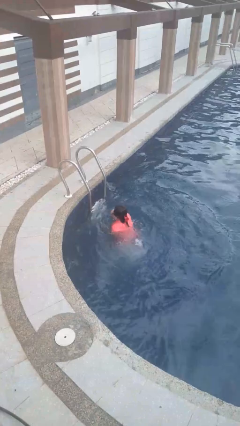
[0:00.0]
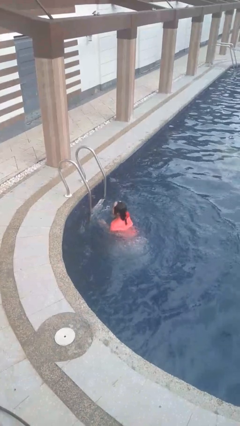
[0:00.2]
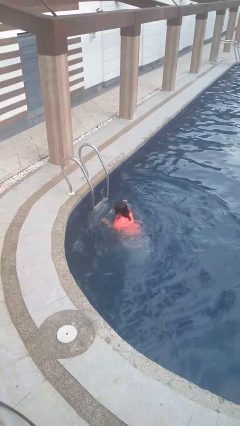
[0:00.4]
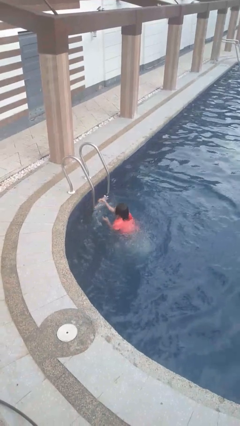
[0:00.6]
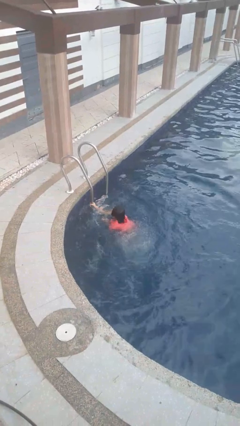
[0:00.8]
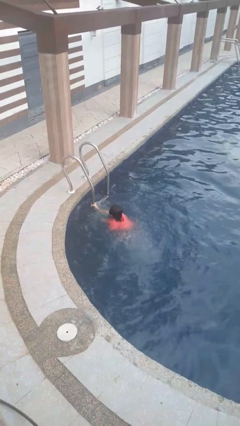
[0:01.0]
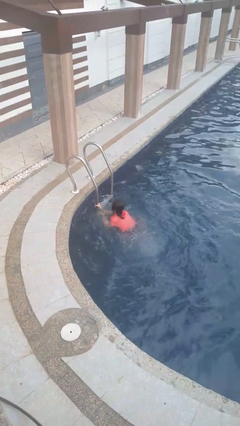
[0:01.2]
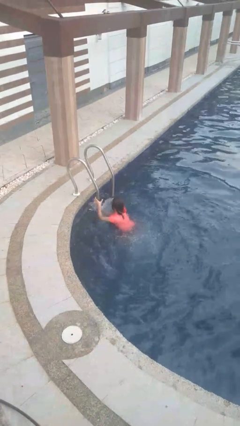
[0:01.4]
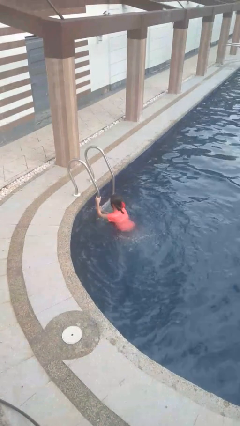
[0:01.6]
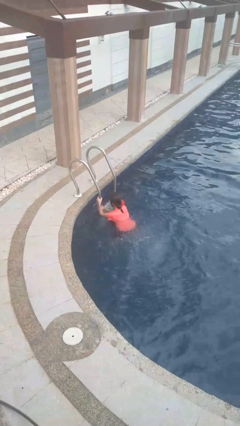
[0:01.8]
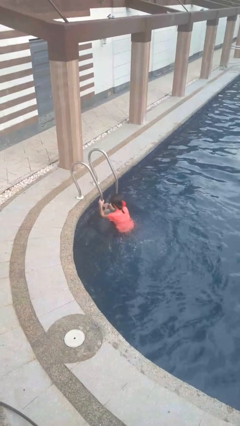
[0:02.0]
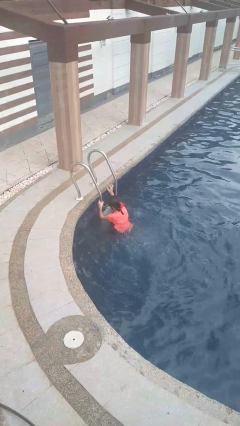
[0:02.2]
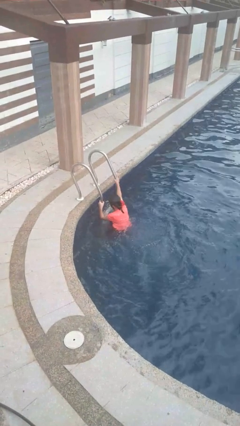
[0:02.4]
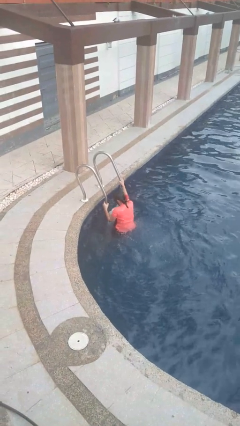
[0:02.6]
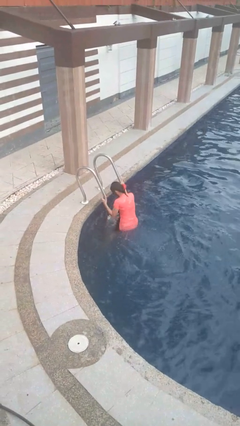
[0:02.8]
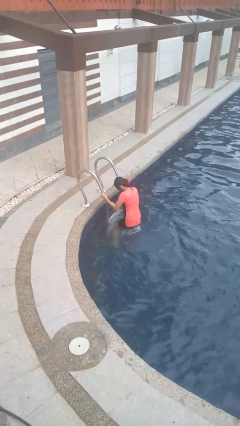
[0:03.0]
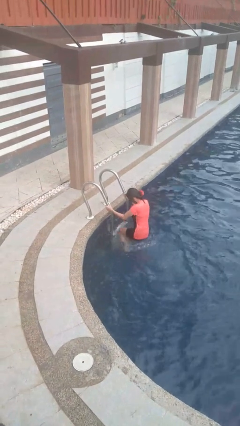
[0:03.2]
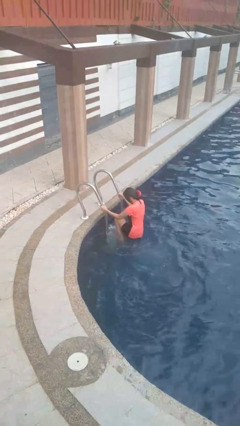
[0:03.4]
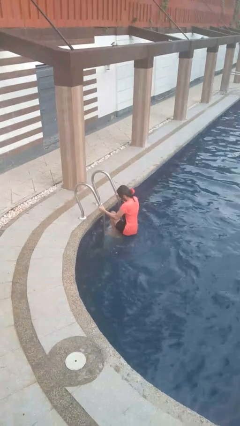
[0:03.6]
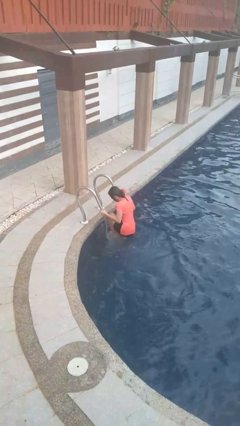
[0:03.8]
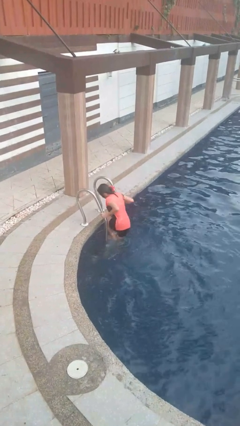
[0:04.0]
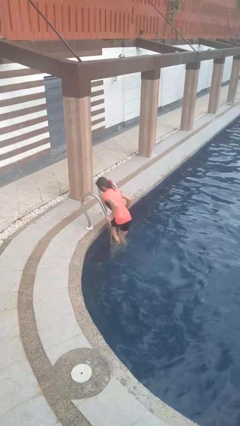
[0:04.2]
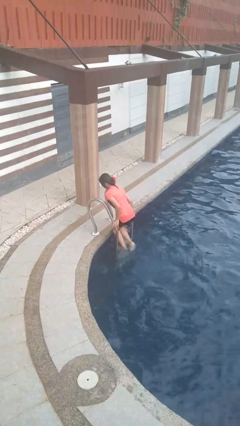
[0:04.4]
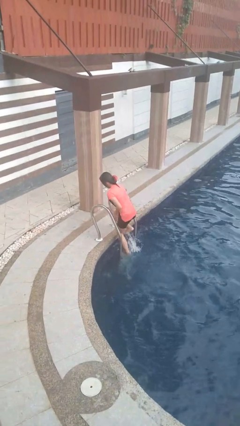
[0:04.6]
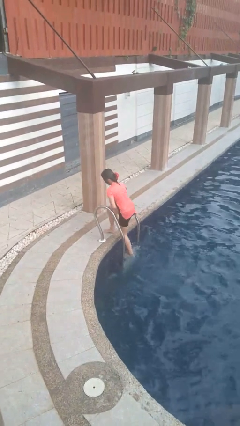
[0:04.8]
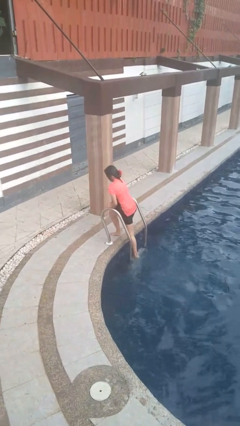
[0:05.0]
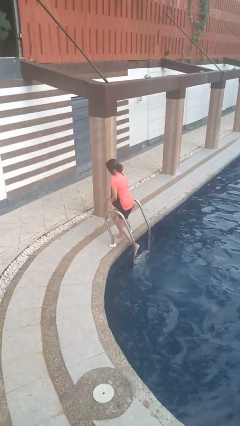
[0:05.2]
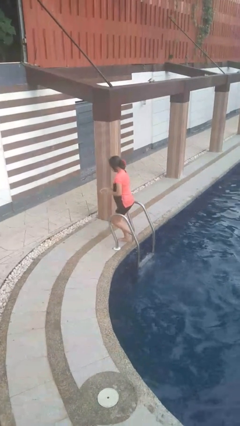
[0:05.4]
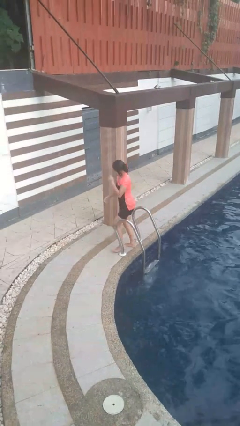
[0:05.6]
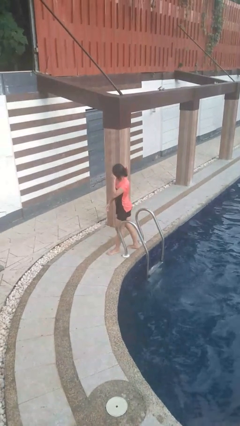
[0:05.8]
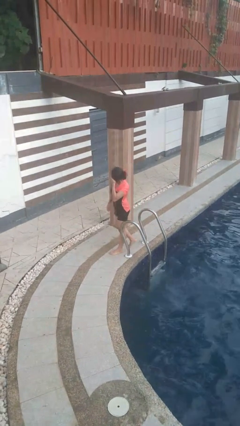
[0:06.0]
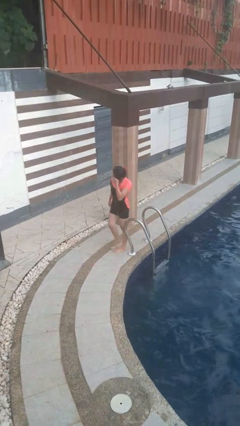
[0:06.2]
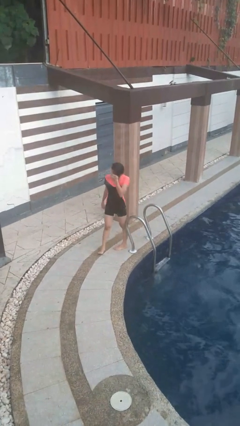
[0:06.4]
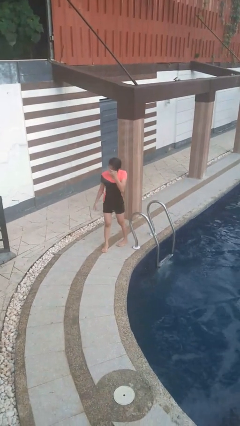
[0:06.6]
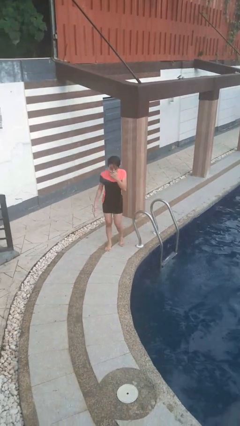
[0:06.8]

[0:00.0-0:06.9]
person exits pool

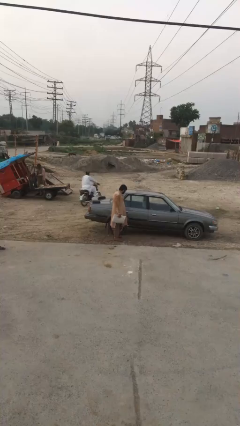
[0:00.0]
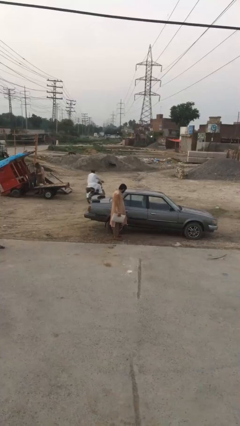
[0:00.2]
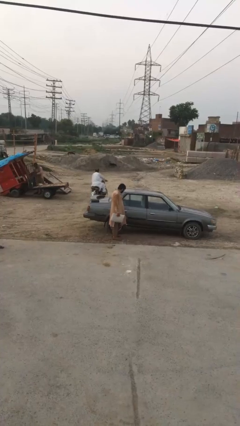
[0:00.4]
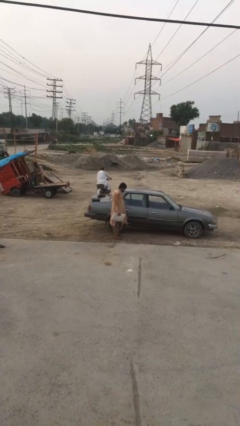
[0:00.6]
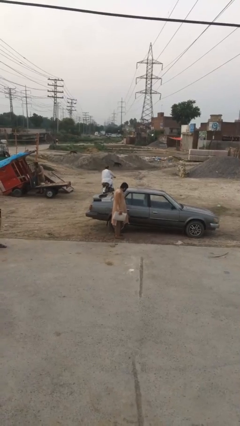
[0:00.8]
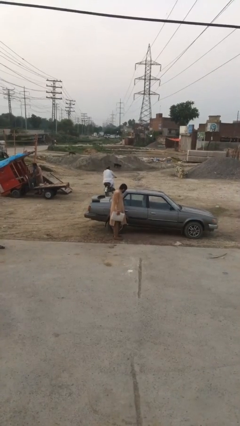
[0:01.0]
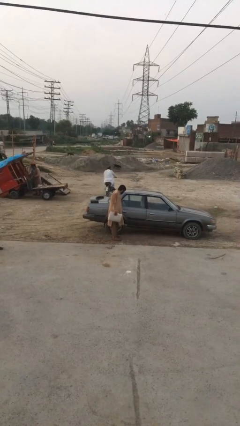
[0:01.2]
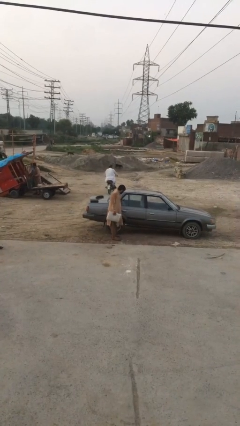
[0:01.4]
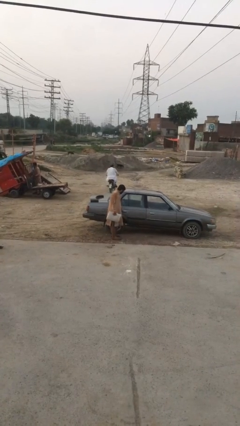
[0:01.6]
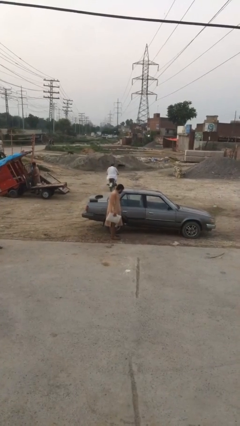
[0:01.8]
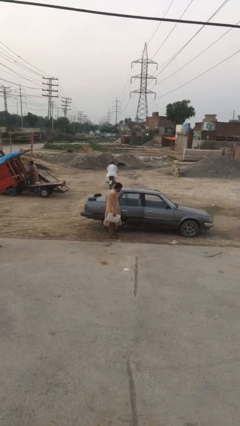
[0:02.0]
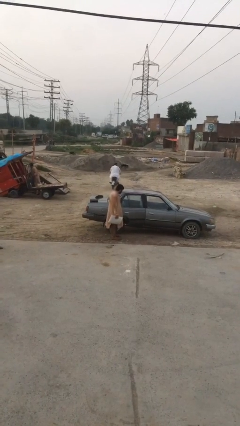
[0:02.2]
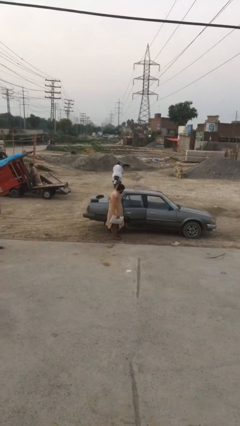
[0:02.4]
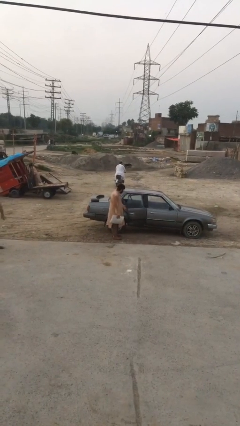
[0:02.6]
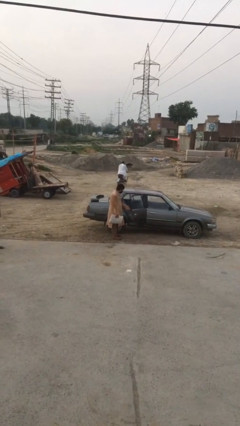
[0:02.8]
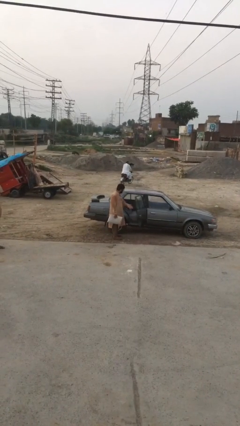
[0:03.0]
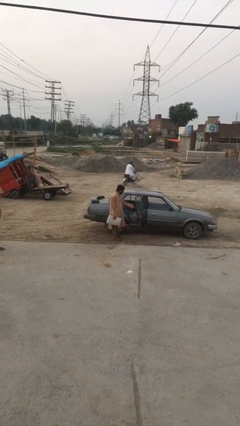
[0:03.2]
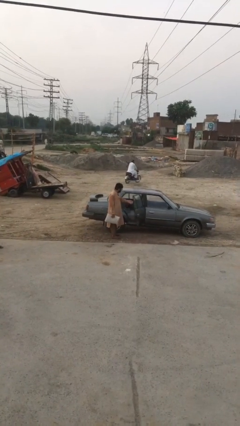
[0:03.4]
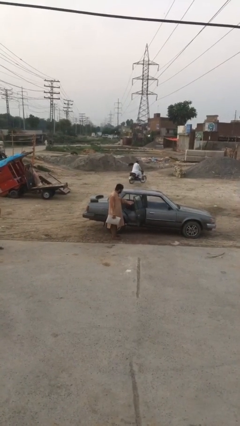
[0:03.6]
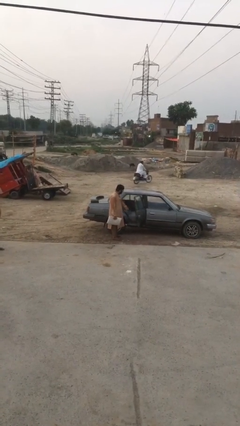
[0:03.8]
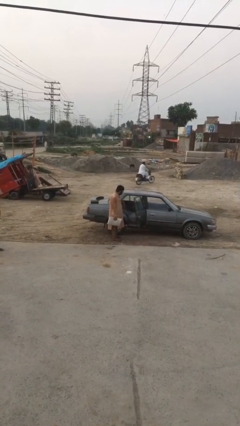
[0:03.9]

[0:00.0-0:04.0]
person opens car door

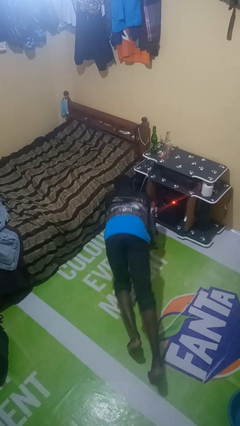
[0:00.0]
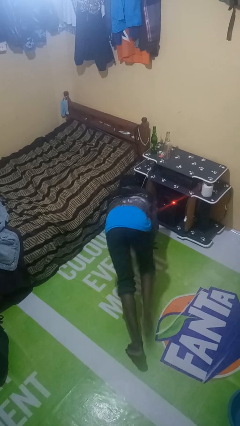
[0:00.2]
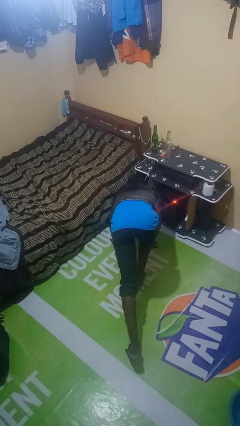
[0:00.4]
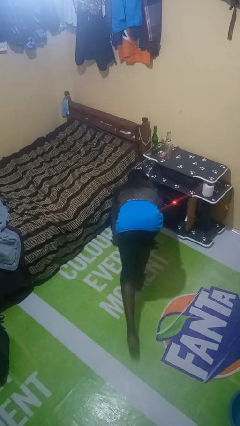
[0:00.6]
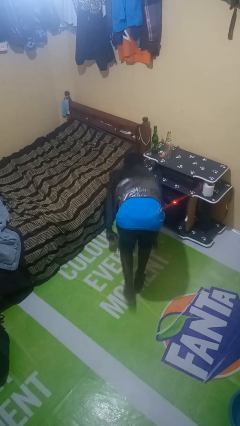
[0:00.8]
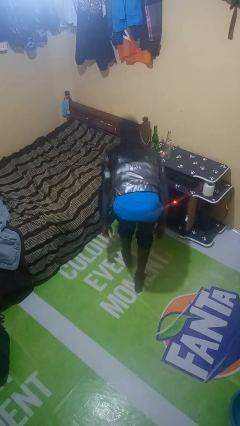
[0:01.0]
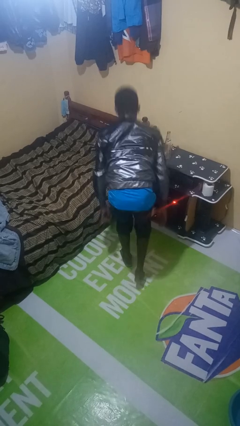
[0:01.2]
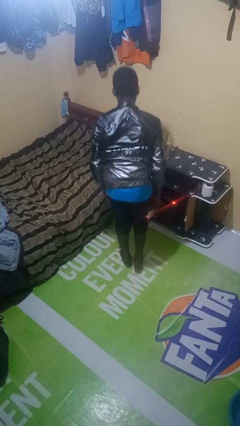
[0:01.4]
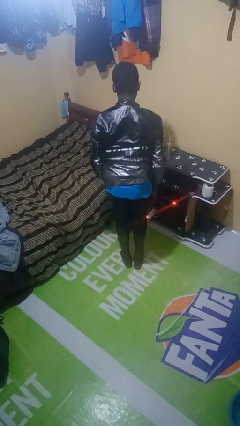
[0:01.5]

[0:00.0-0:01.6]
person stands up from floor

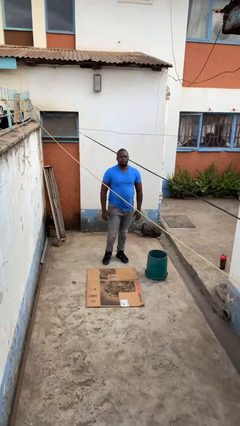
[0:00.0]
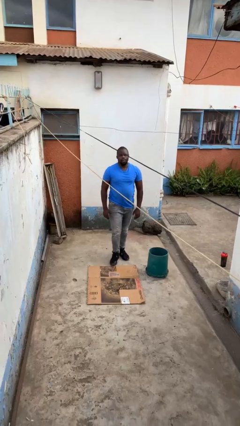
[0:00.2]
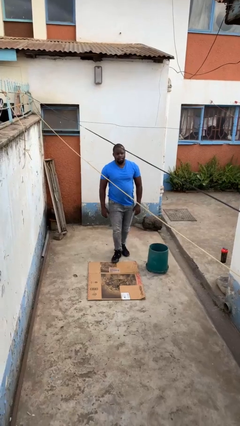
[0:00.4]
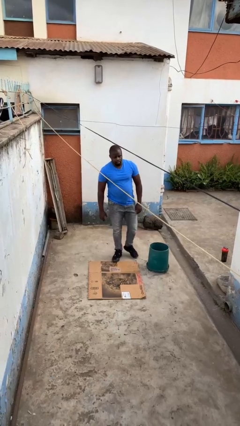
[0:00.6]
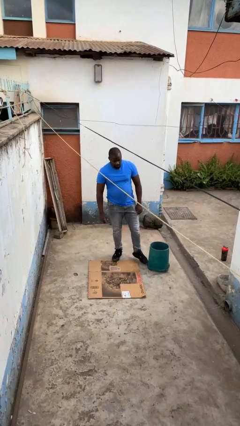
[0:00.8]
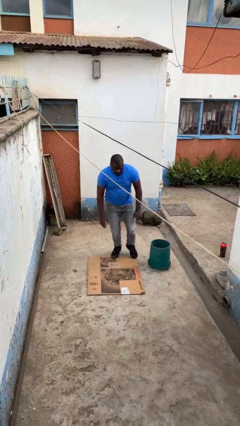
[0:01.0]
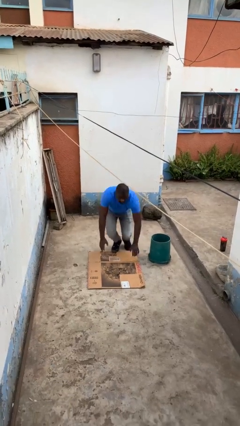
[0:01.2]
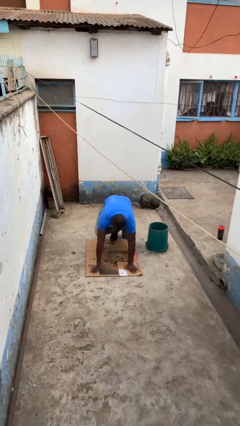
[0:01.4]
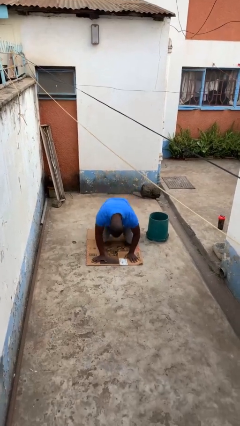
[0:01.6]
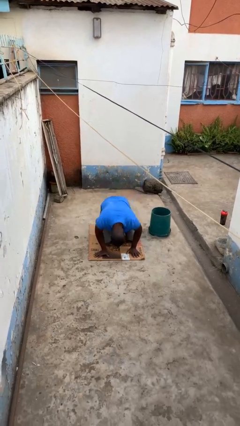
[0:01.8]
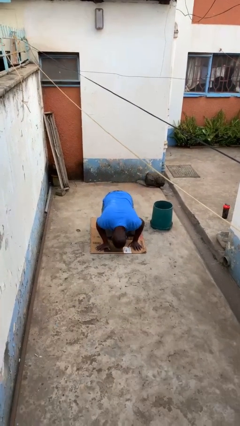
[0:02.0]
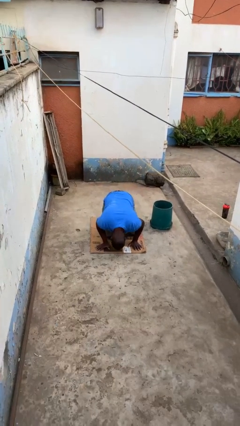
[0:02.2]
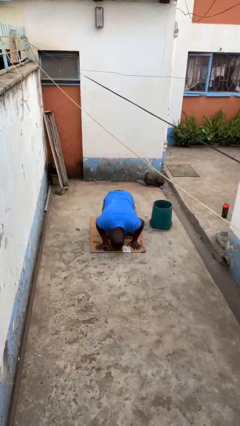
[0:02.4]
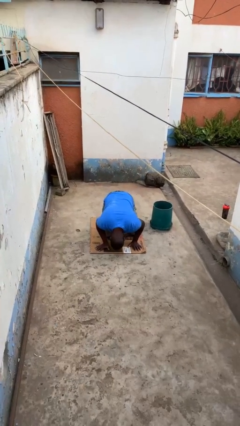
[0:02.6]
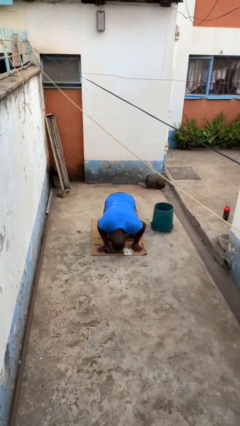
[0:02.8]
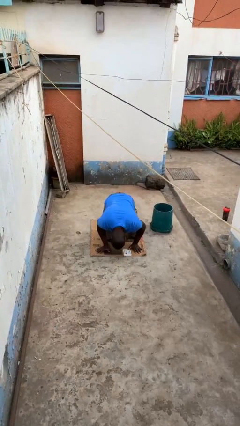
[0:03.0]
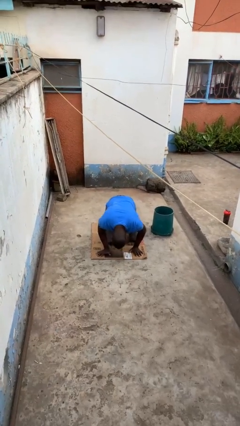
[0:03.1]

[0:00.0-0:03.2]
person trips on object on floor

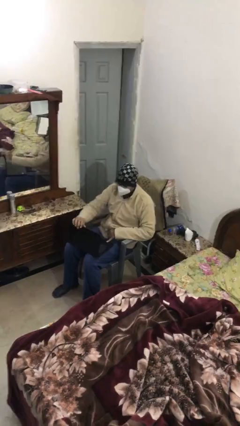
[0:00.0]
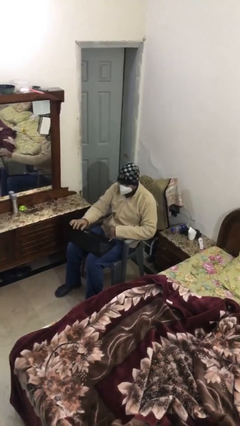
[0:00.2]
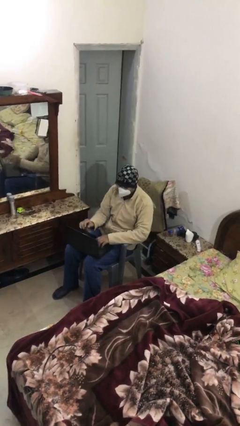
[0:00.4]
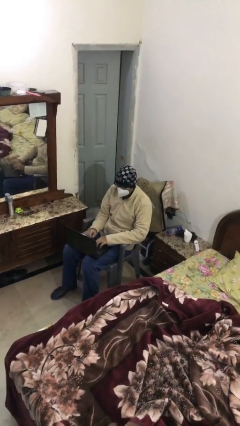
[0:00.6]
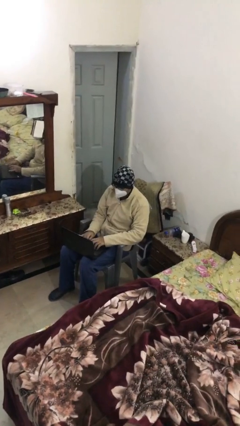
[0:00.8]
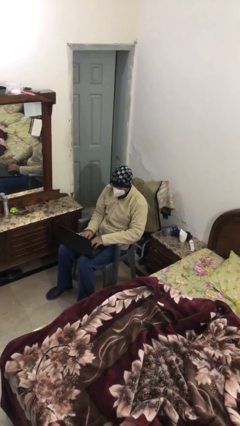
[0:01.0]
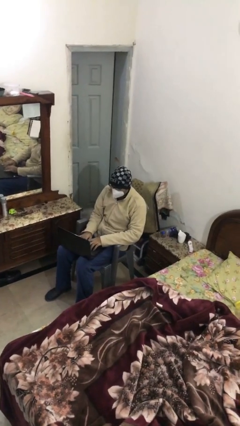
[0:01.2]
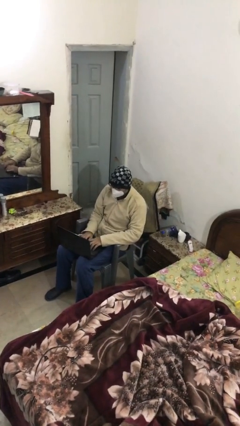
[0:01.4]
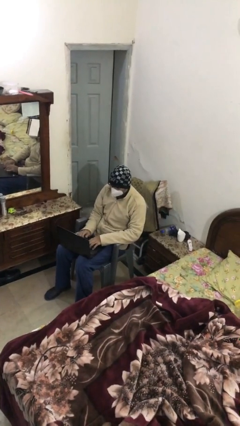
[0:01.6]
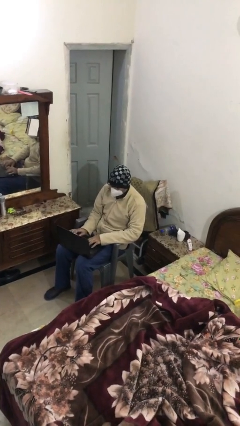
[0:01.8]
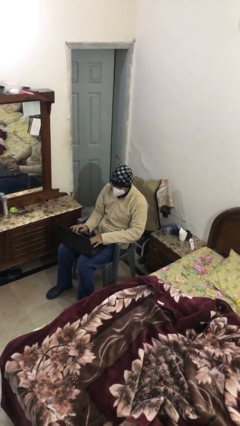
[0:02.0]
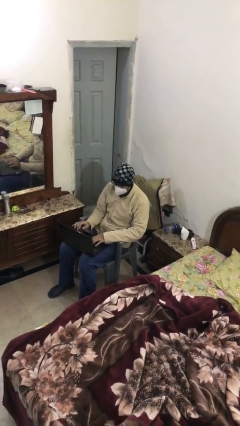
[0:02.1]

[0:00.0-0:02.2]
person interacts with laptop
